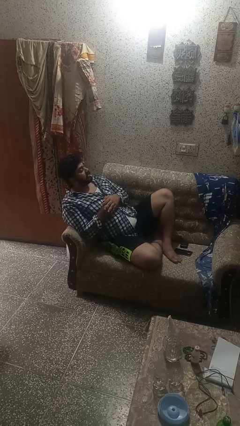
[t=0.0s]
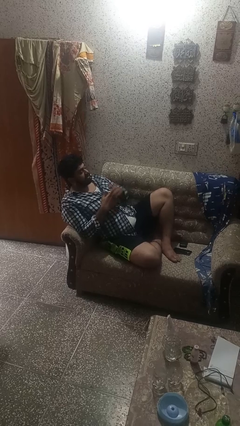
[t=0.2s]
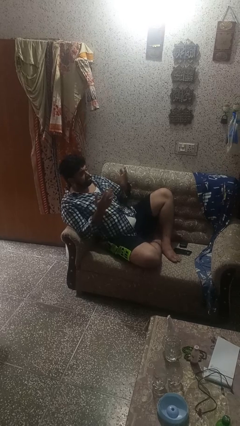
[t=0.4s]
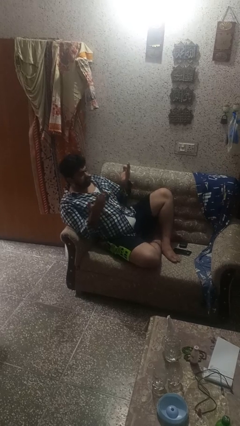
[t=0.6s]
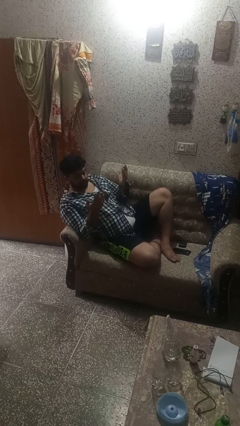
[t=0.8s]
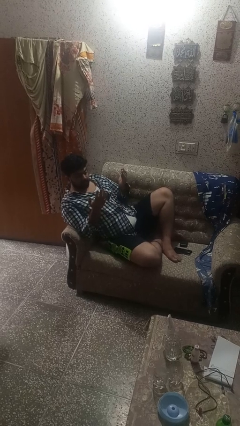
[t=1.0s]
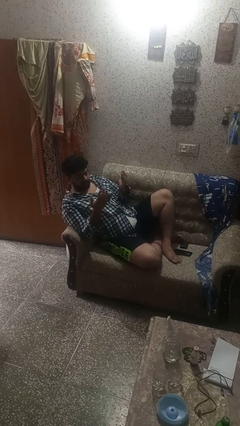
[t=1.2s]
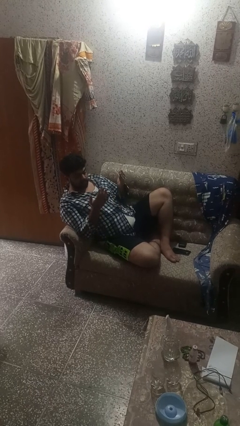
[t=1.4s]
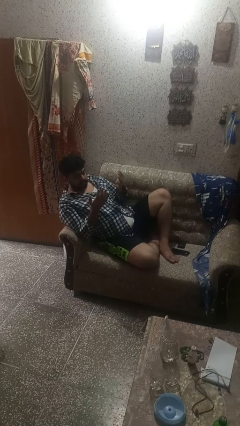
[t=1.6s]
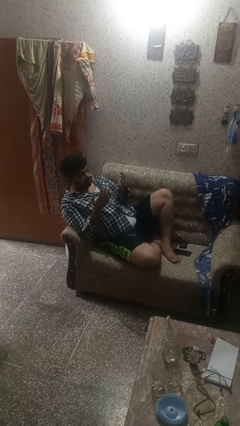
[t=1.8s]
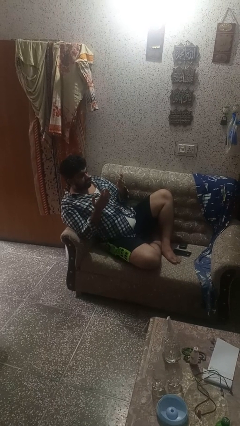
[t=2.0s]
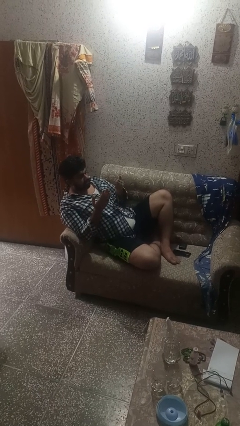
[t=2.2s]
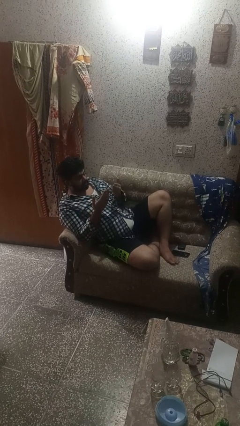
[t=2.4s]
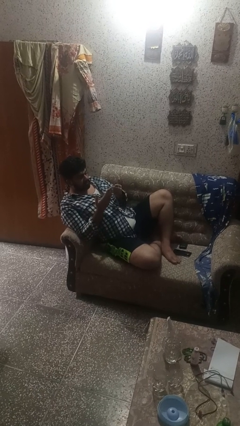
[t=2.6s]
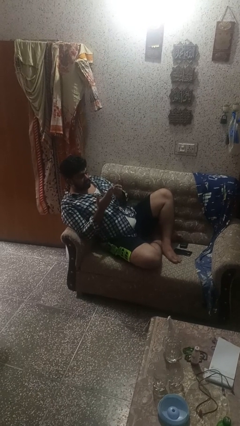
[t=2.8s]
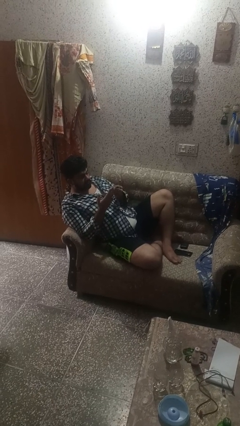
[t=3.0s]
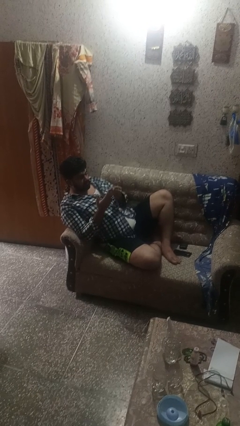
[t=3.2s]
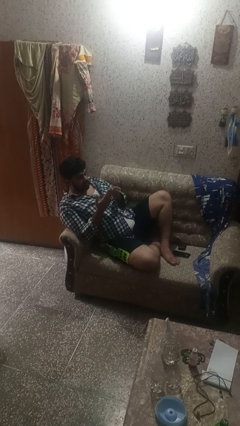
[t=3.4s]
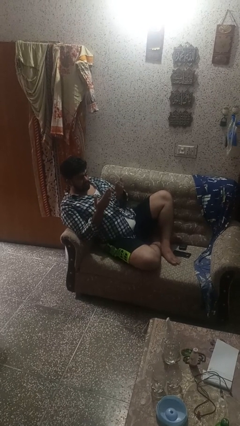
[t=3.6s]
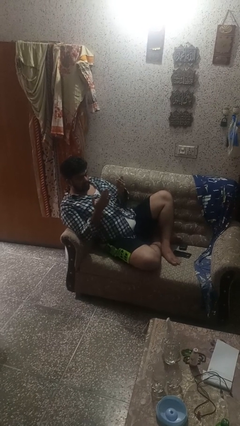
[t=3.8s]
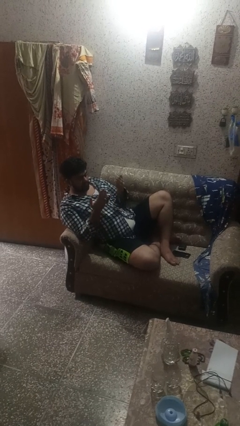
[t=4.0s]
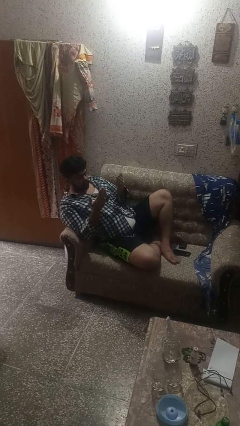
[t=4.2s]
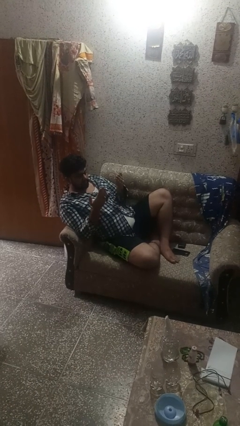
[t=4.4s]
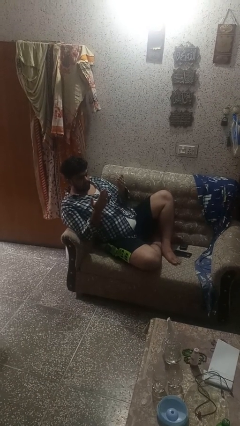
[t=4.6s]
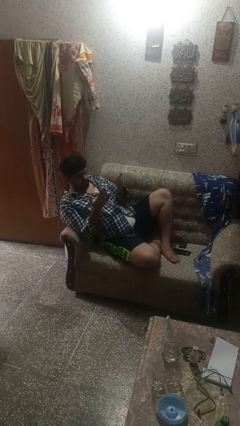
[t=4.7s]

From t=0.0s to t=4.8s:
person prays

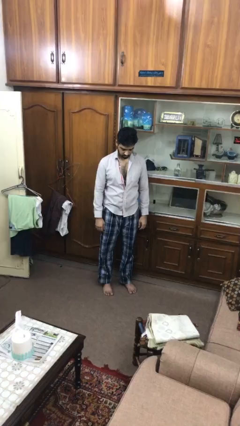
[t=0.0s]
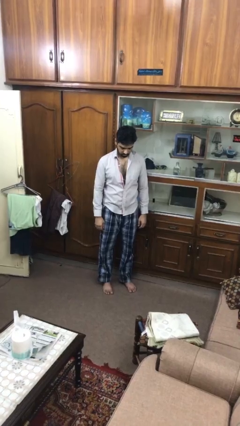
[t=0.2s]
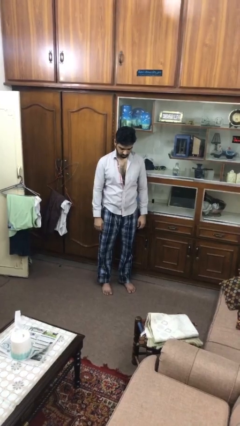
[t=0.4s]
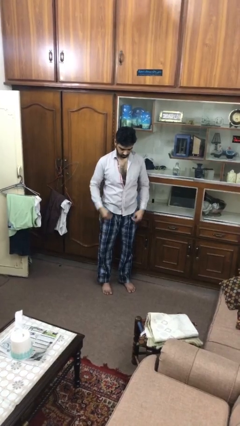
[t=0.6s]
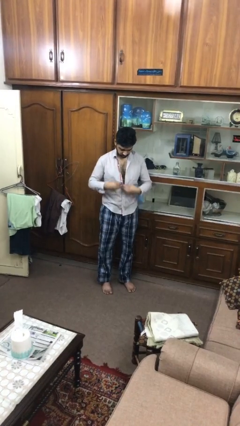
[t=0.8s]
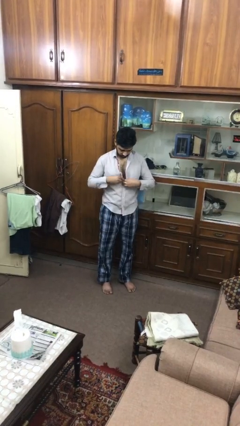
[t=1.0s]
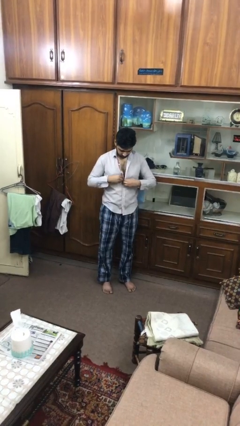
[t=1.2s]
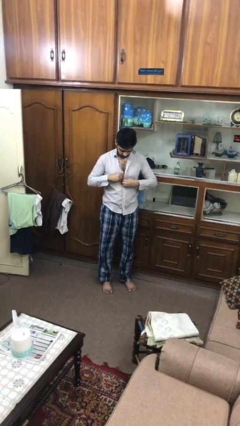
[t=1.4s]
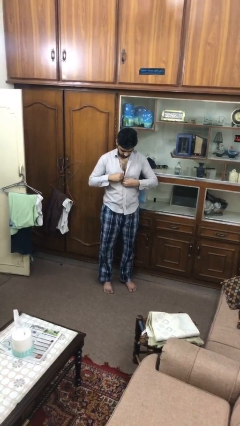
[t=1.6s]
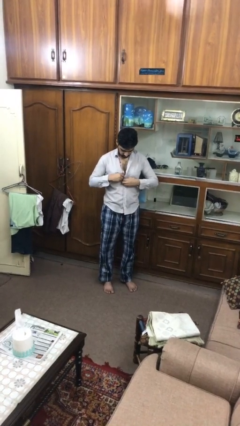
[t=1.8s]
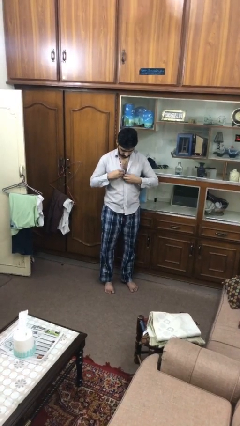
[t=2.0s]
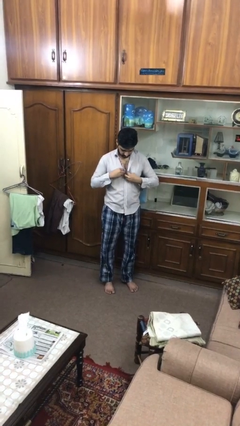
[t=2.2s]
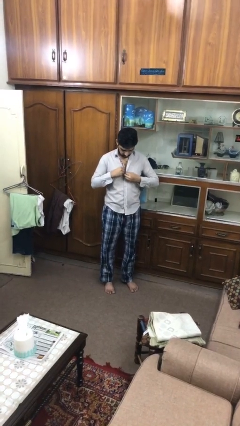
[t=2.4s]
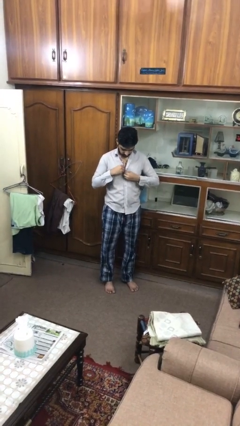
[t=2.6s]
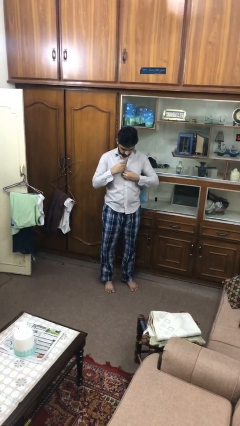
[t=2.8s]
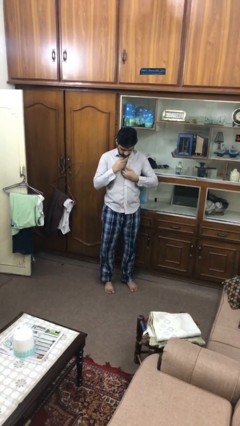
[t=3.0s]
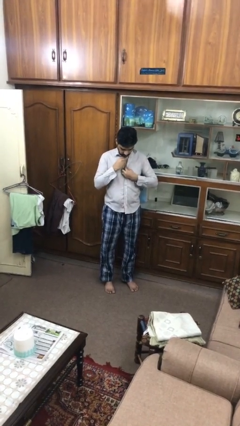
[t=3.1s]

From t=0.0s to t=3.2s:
person buttons shirt

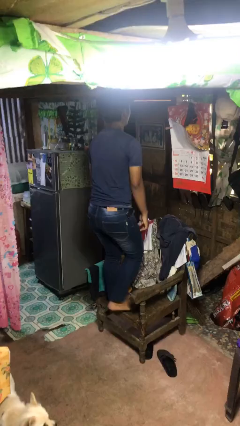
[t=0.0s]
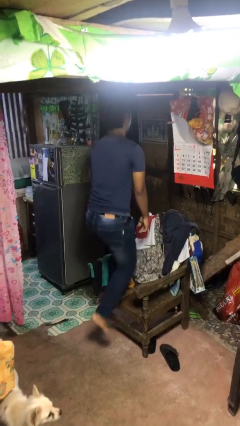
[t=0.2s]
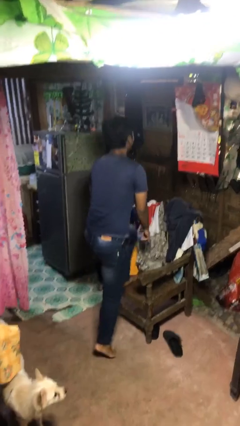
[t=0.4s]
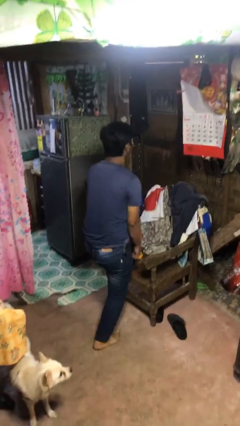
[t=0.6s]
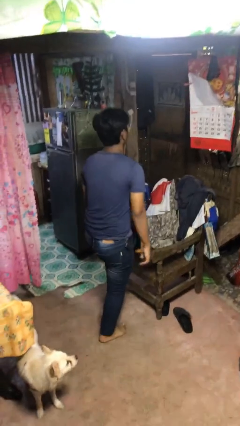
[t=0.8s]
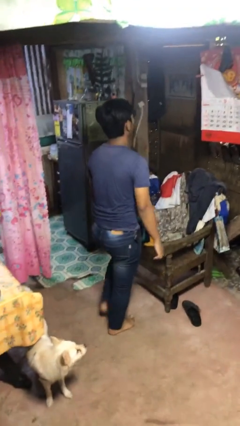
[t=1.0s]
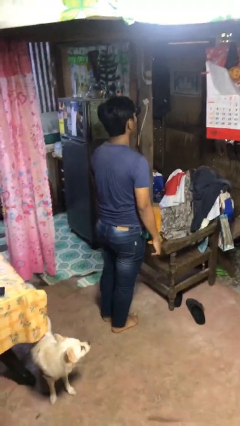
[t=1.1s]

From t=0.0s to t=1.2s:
person climbs off chair

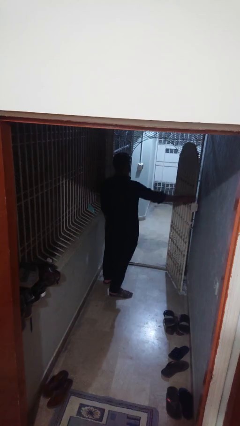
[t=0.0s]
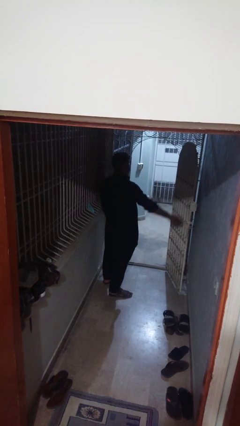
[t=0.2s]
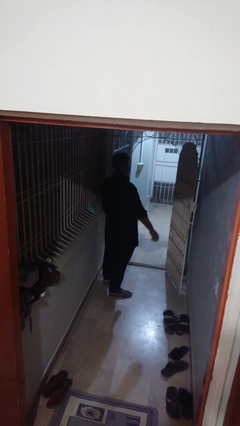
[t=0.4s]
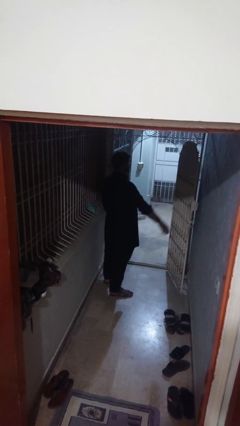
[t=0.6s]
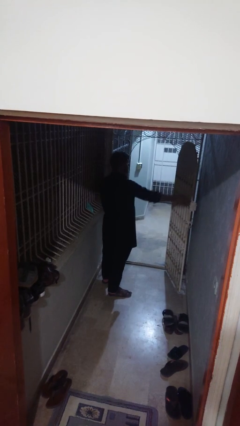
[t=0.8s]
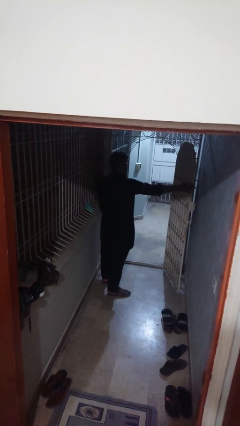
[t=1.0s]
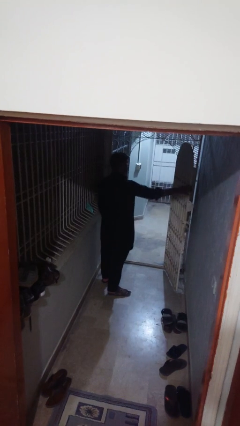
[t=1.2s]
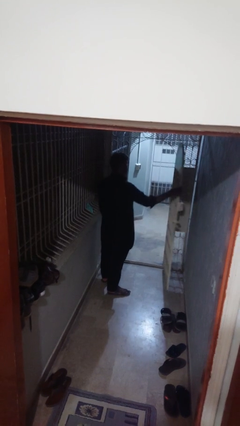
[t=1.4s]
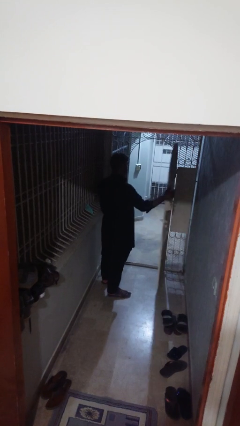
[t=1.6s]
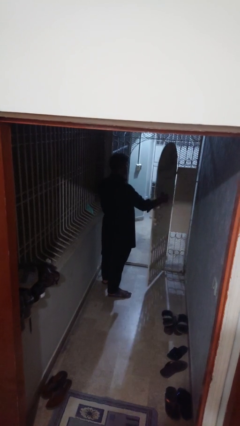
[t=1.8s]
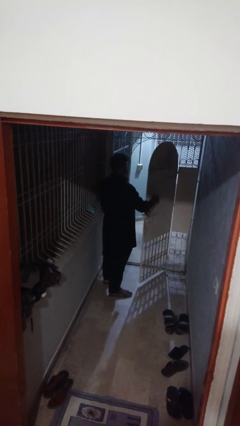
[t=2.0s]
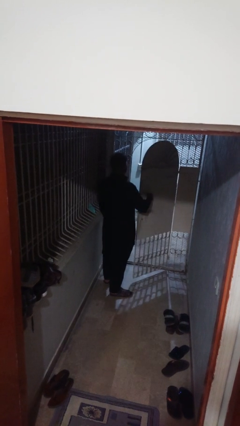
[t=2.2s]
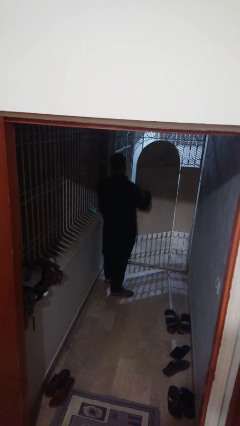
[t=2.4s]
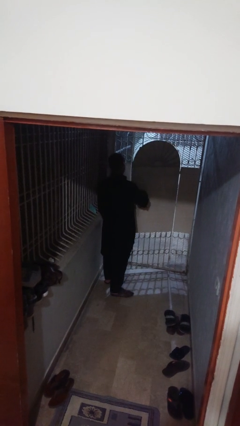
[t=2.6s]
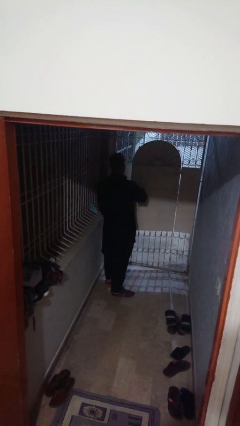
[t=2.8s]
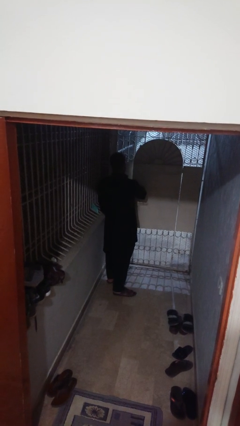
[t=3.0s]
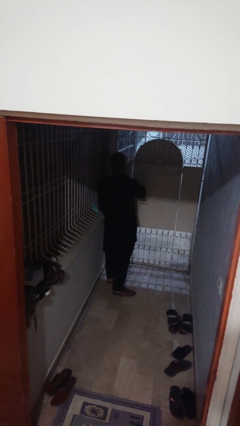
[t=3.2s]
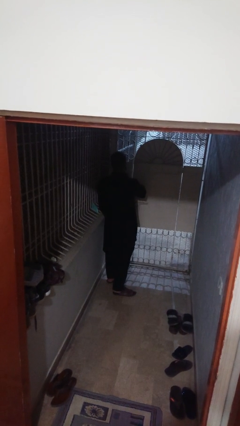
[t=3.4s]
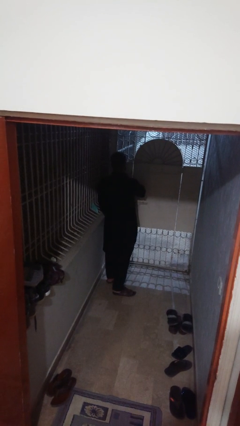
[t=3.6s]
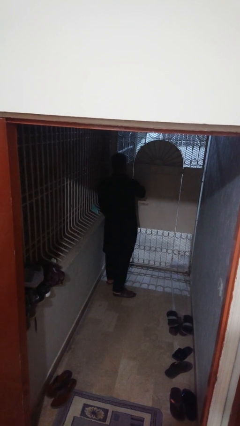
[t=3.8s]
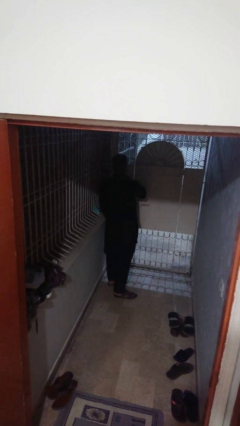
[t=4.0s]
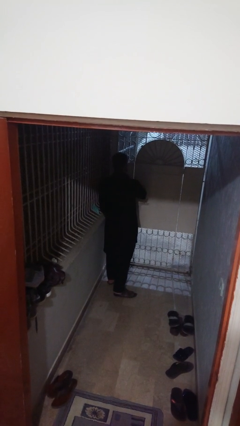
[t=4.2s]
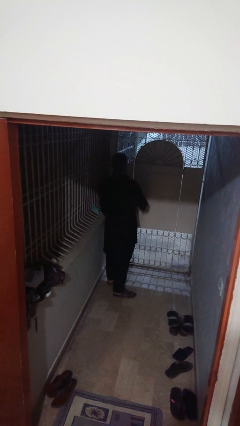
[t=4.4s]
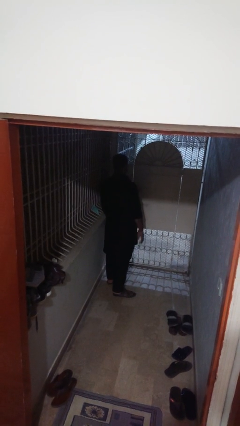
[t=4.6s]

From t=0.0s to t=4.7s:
person closes gate

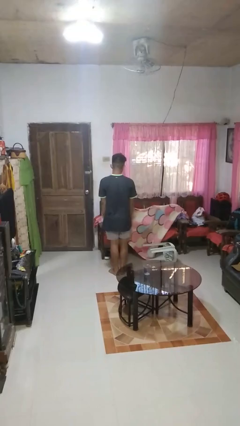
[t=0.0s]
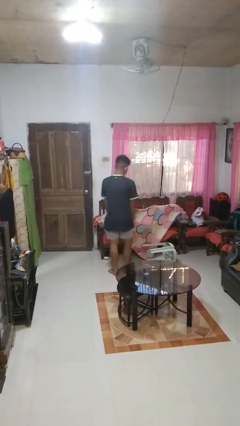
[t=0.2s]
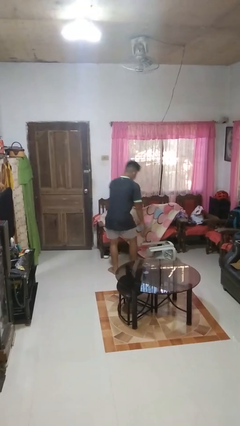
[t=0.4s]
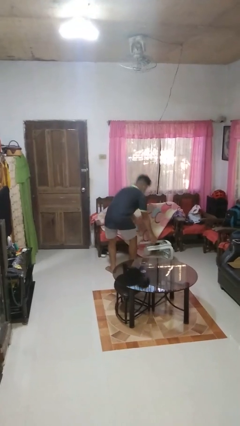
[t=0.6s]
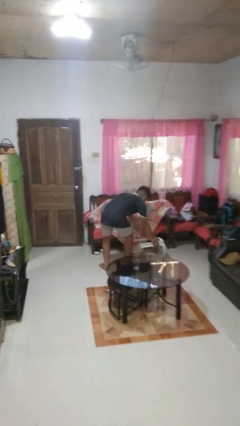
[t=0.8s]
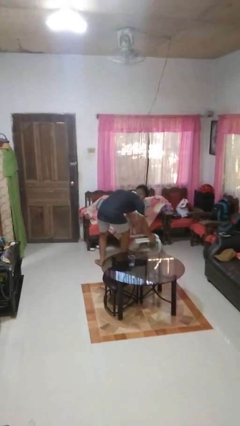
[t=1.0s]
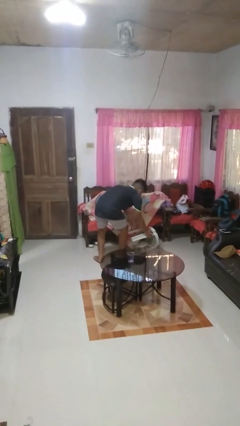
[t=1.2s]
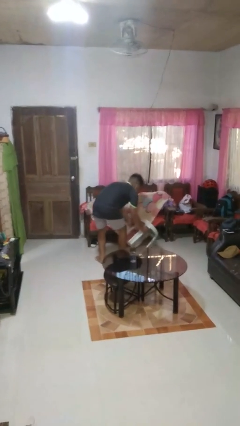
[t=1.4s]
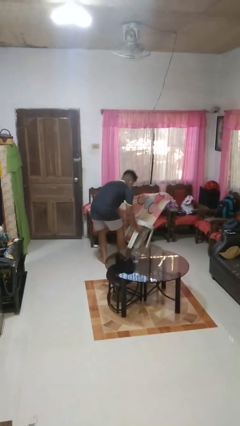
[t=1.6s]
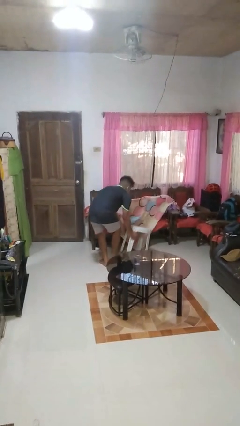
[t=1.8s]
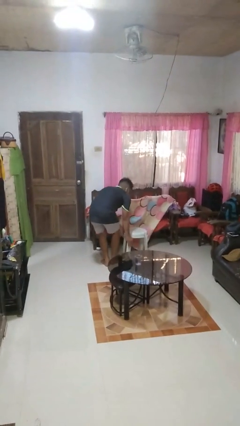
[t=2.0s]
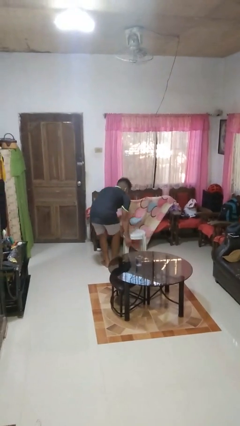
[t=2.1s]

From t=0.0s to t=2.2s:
person sets upright furniture

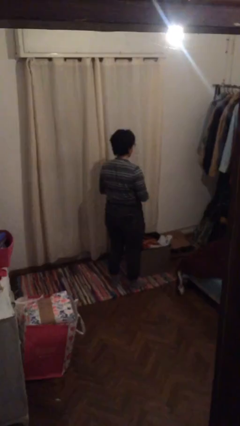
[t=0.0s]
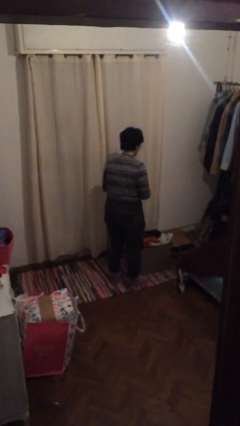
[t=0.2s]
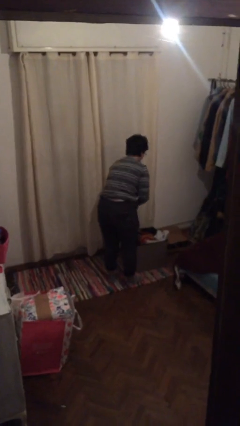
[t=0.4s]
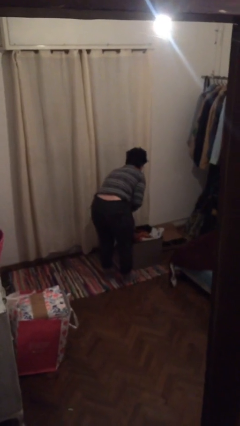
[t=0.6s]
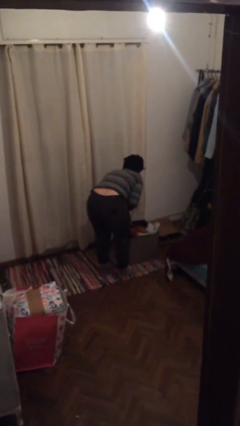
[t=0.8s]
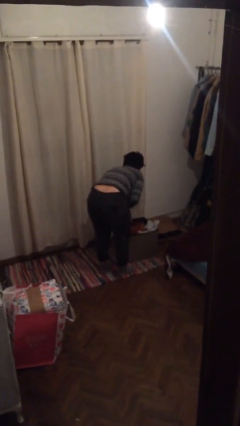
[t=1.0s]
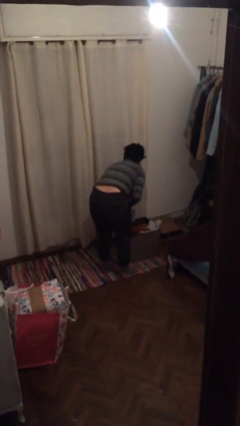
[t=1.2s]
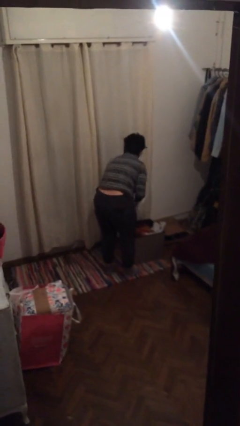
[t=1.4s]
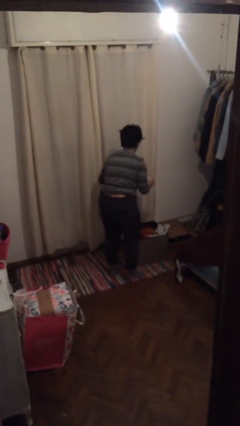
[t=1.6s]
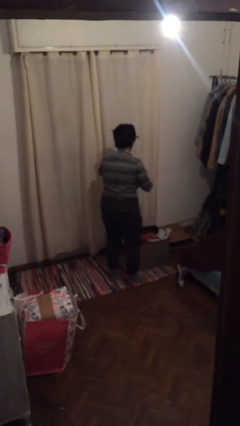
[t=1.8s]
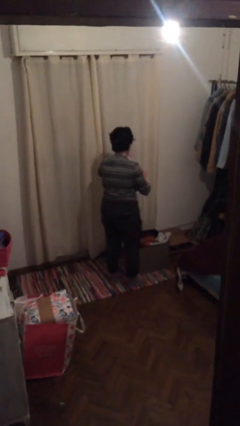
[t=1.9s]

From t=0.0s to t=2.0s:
person takes object from basket
